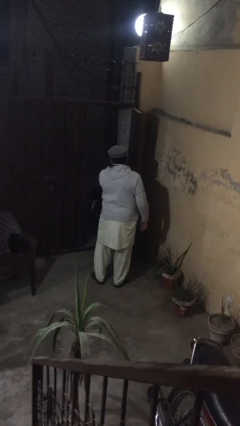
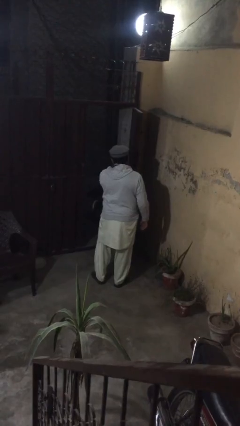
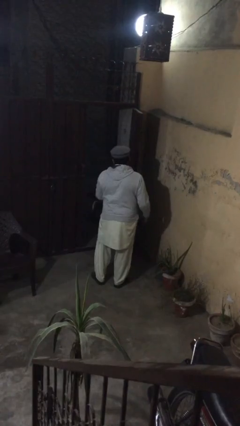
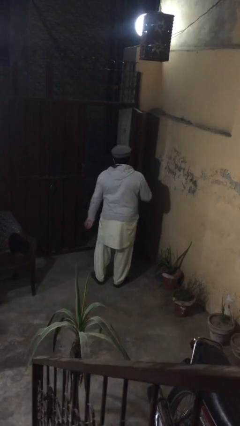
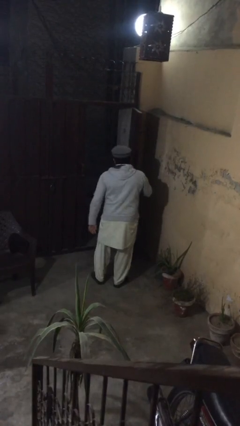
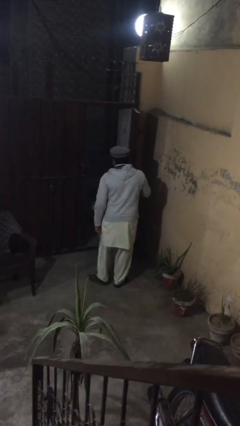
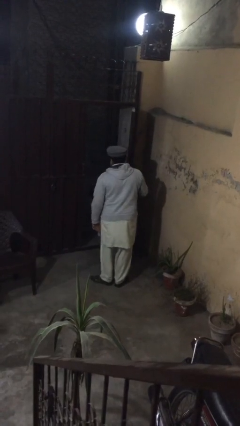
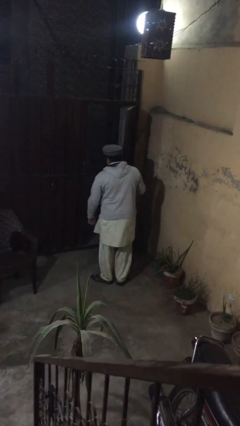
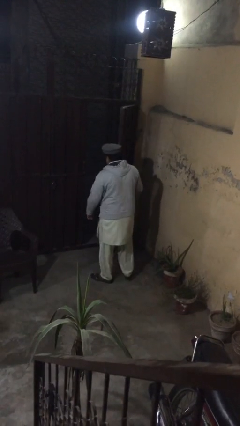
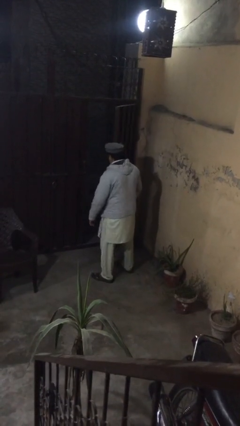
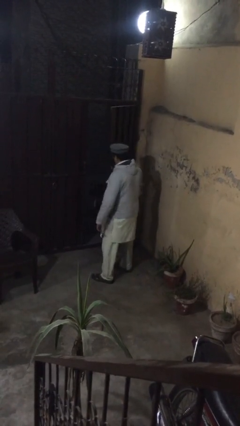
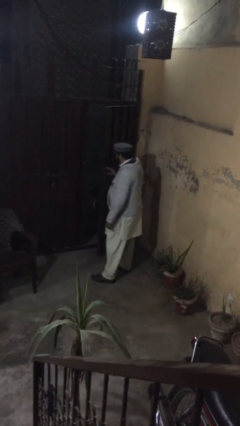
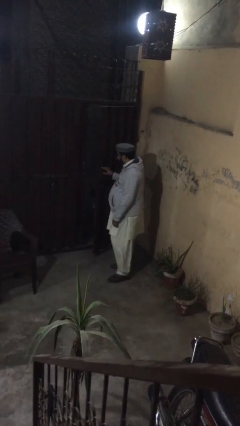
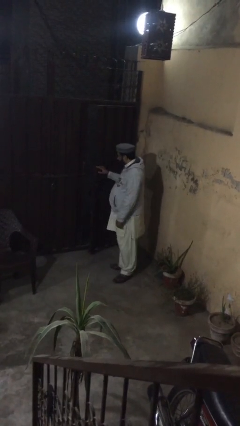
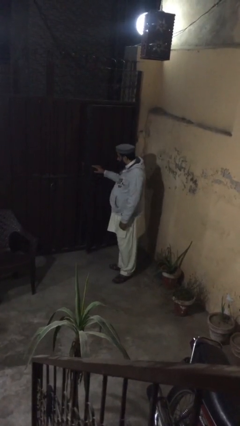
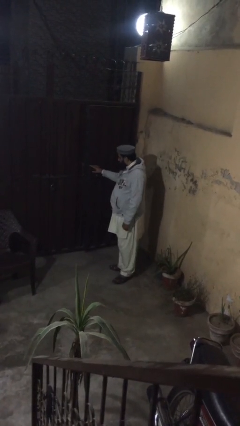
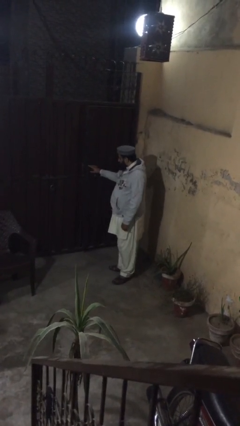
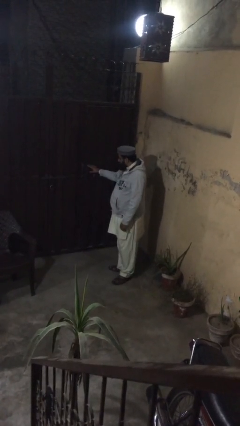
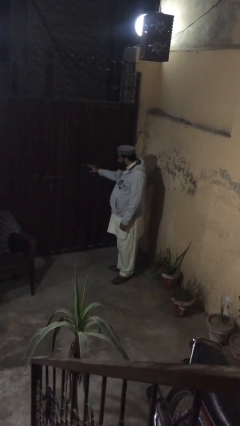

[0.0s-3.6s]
person closes facility door

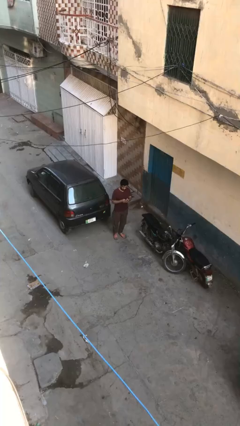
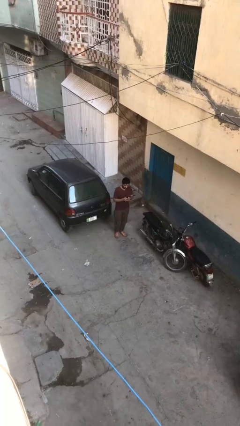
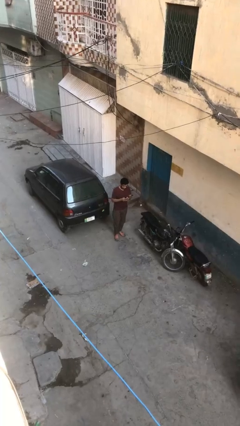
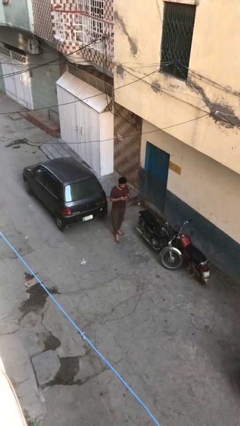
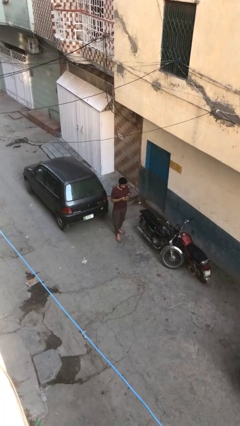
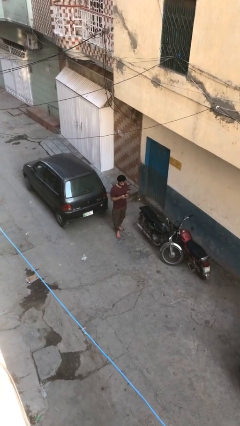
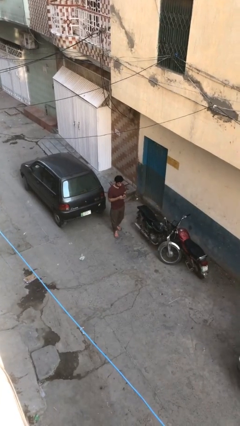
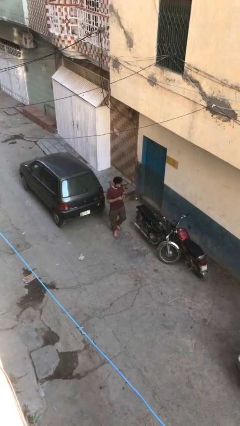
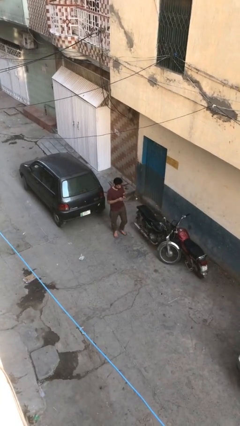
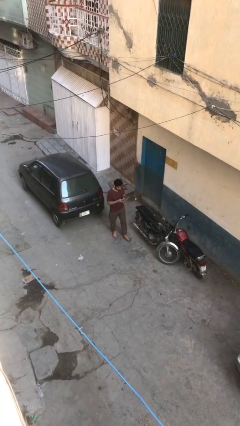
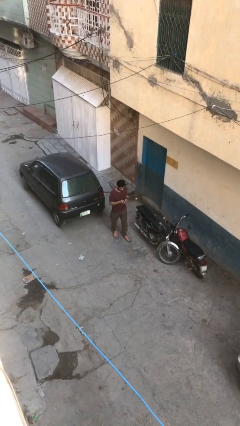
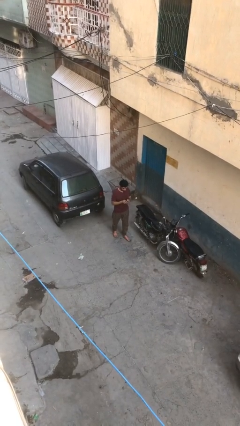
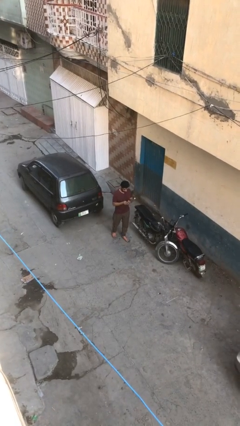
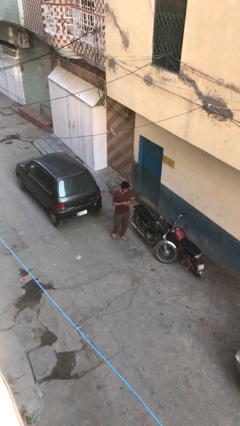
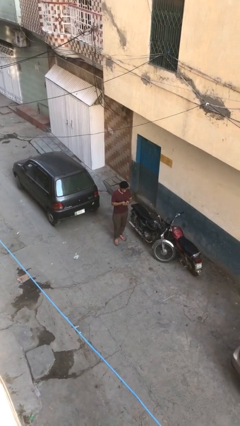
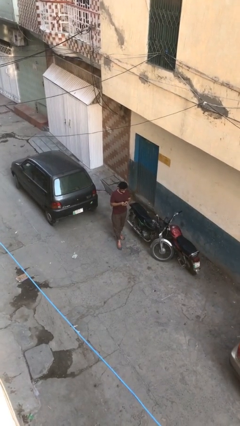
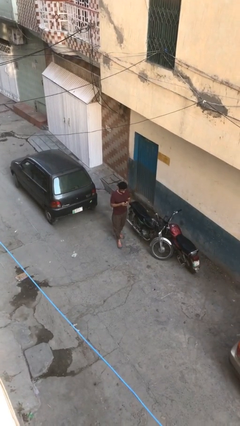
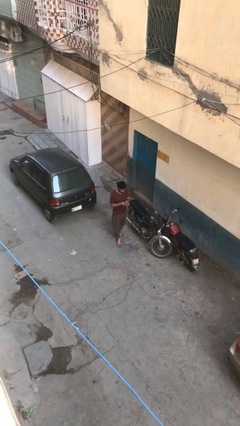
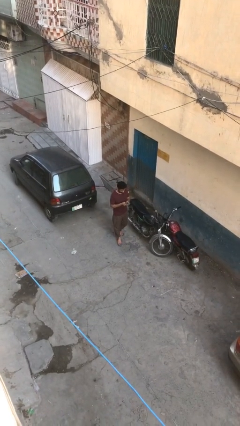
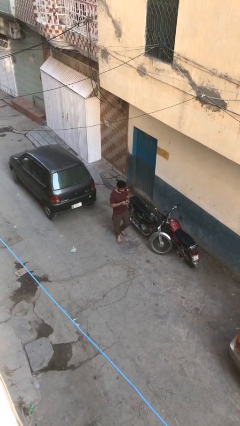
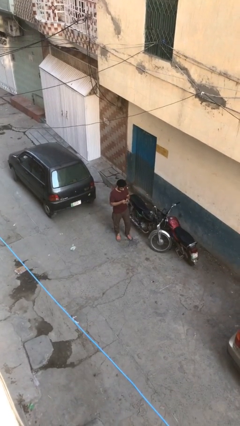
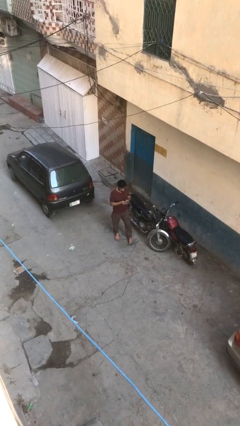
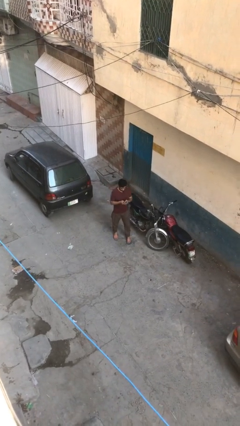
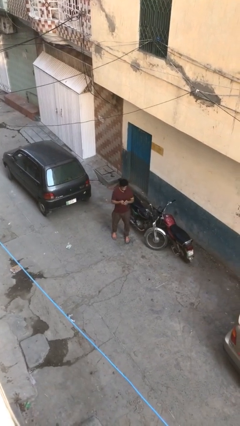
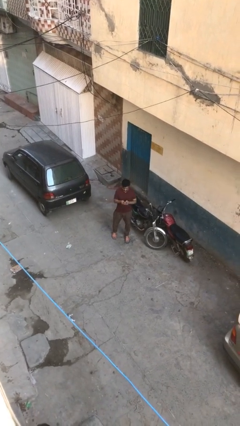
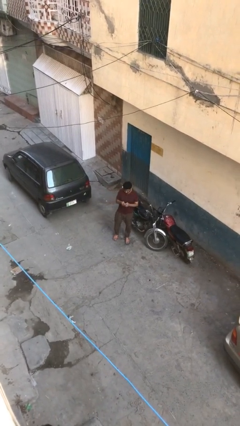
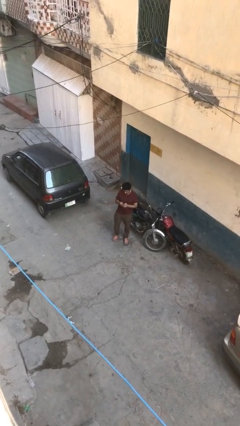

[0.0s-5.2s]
person texts on phone

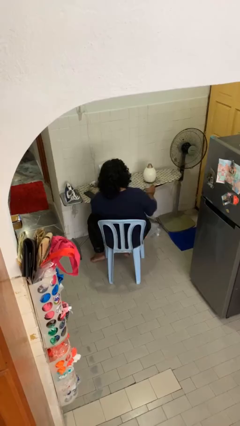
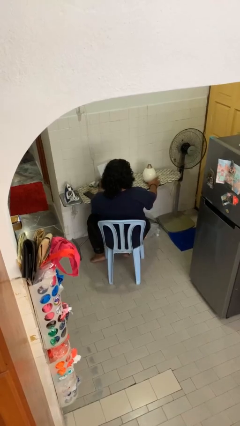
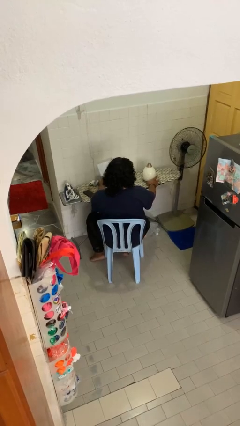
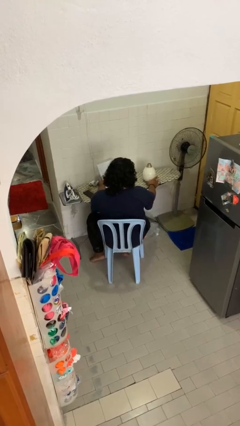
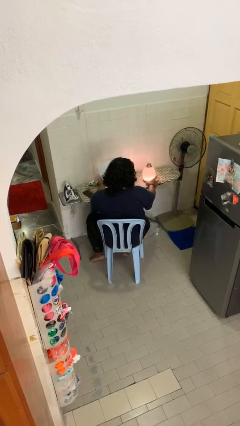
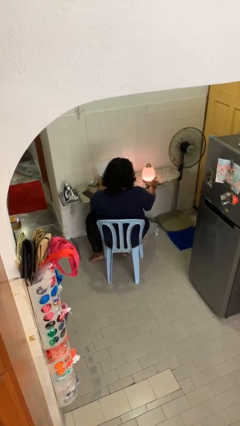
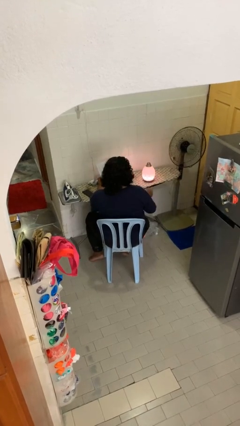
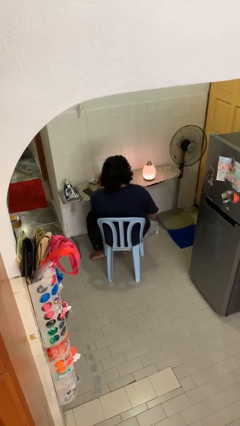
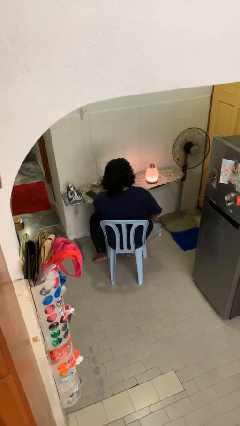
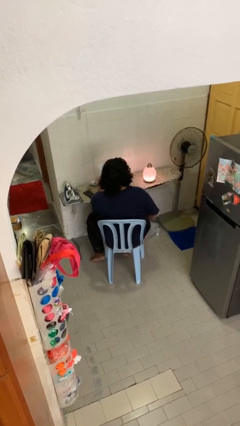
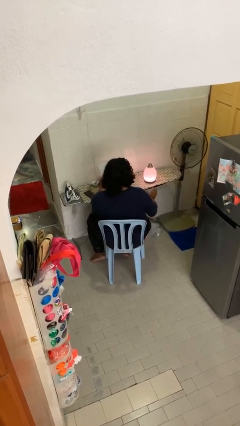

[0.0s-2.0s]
person turns on lamp

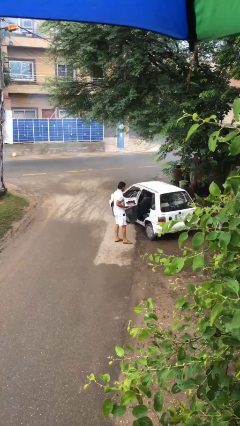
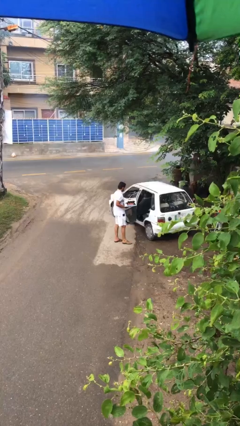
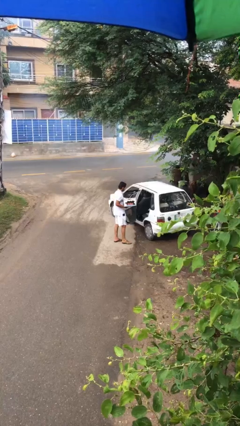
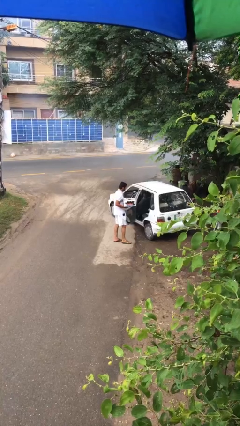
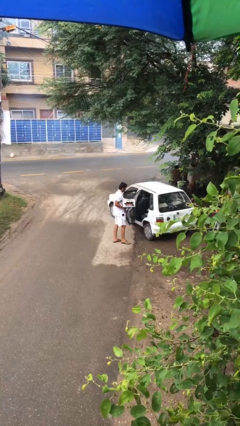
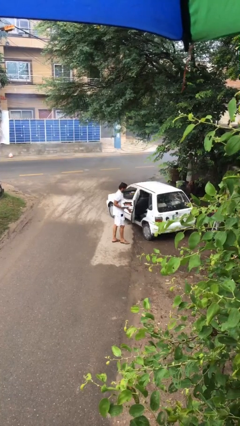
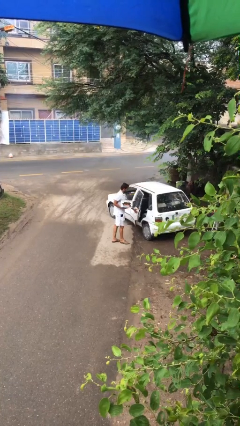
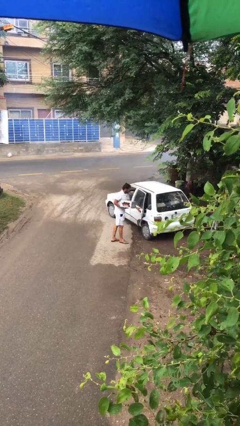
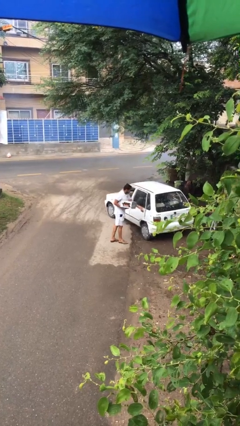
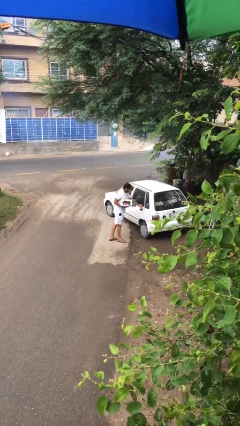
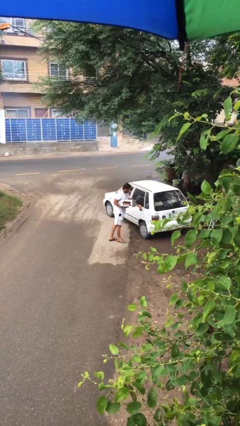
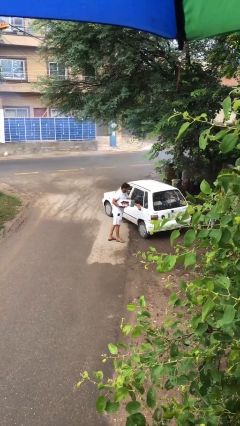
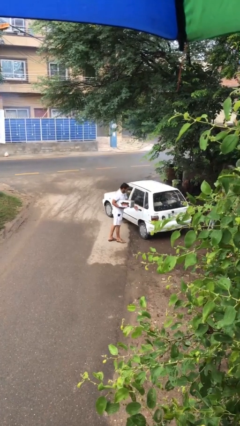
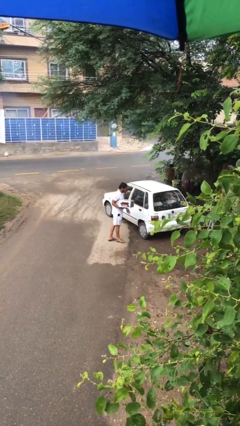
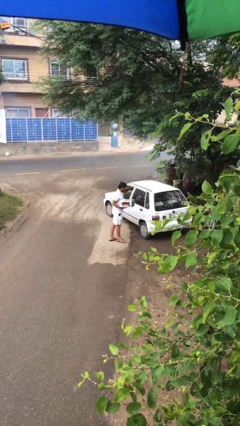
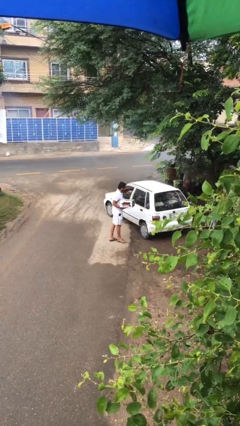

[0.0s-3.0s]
person closes car door

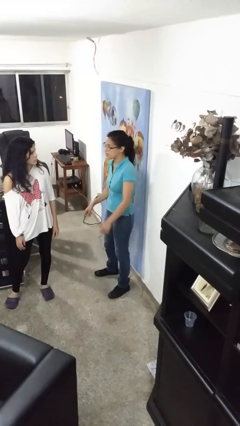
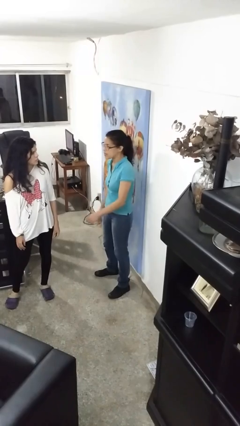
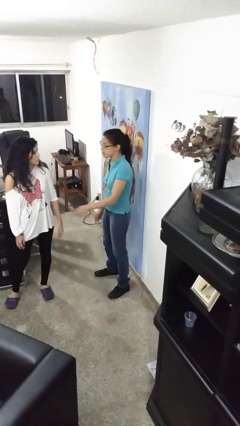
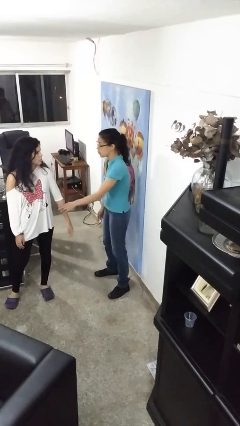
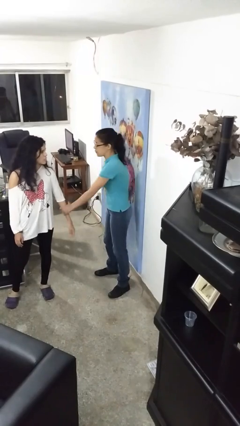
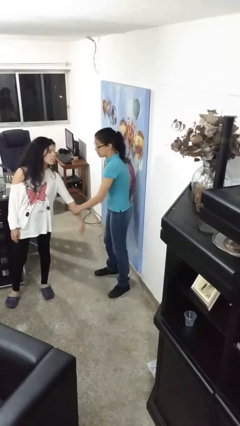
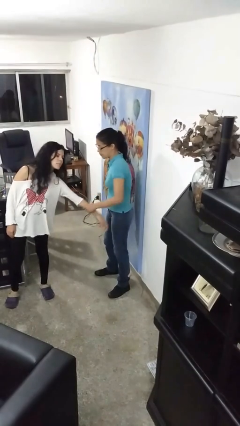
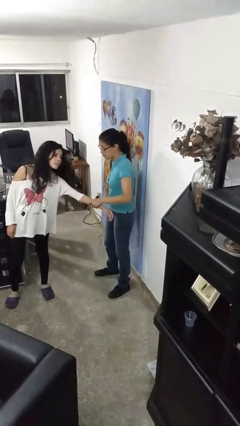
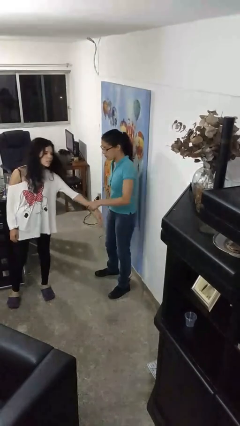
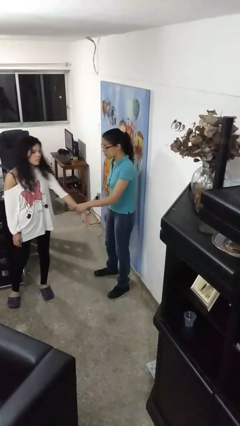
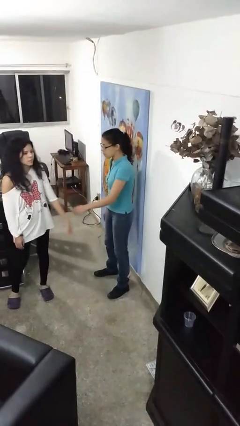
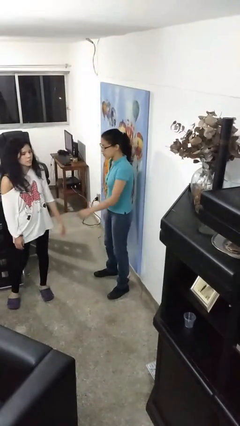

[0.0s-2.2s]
person grabs person by forearm

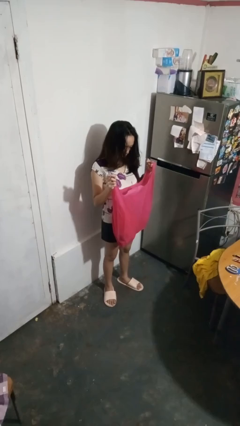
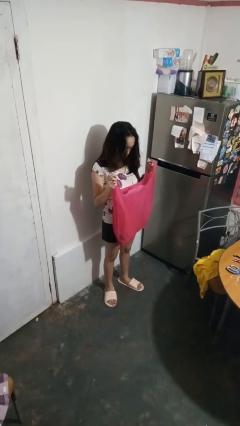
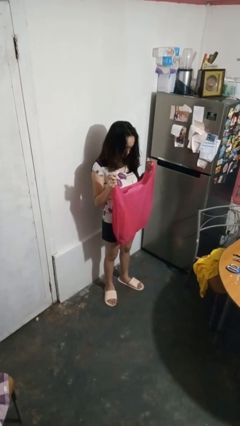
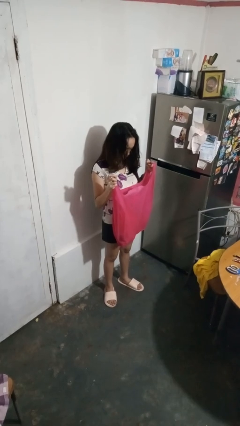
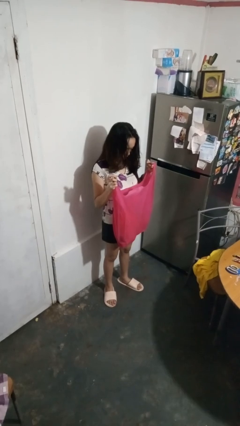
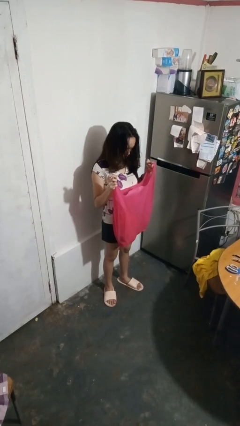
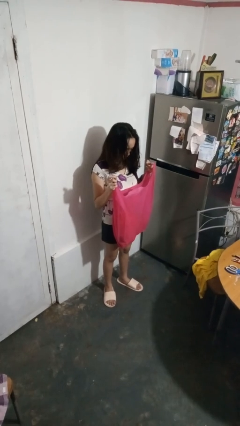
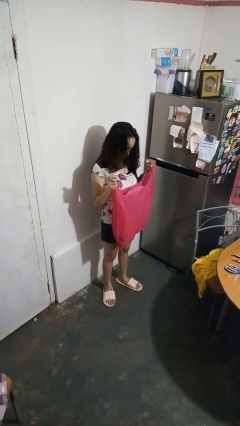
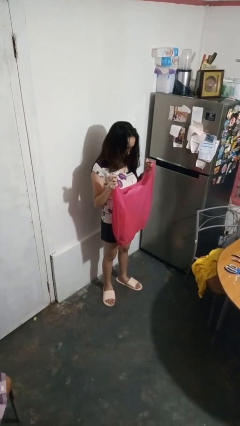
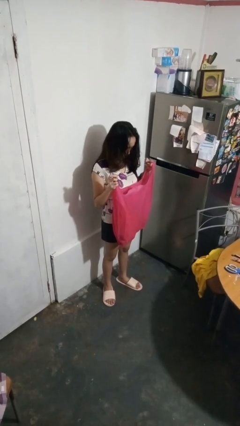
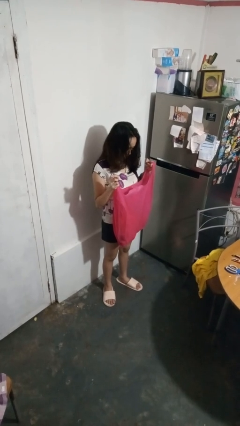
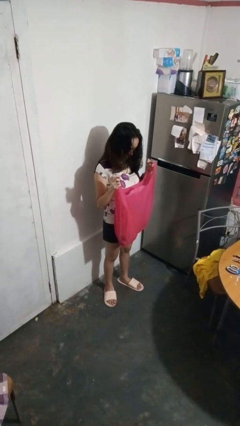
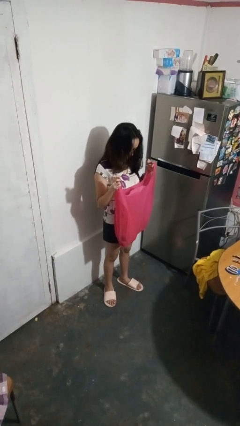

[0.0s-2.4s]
person searches in box
